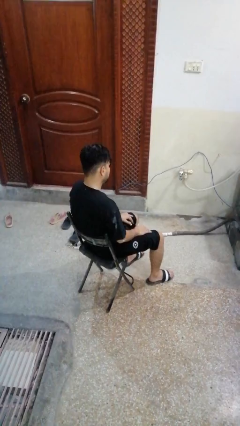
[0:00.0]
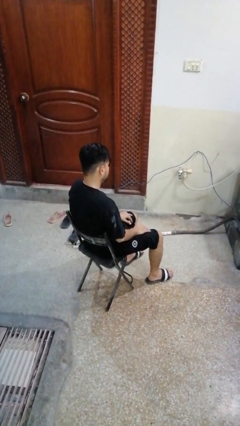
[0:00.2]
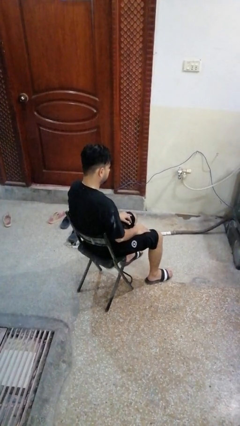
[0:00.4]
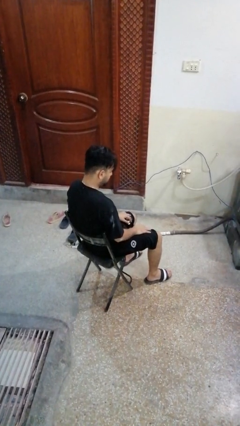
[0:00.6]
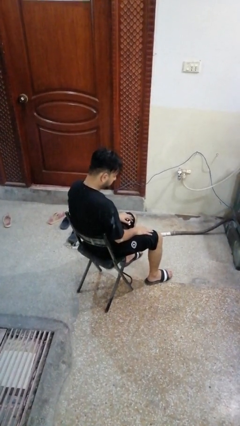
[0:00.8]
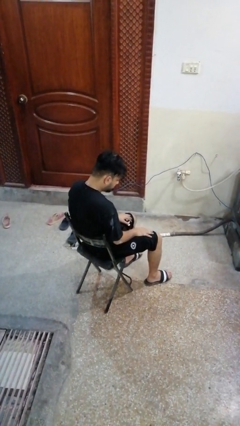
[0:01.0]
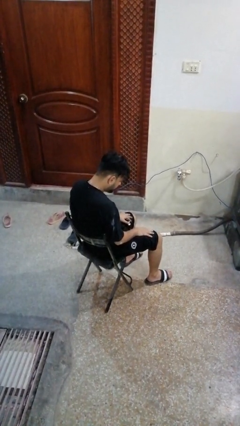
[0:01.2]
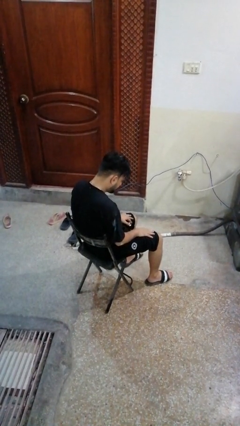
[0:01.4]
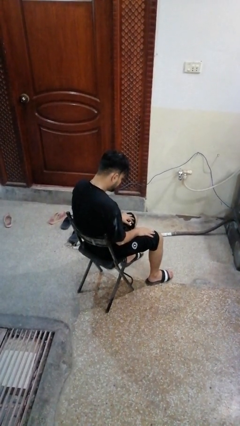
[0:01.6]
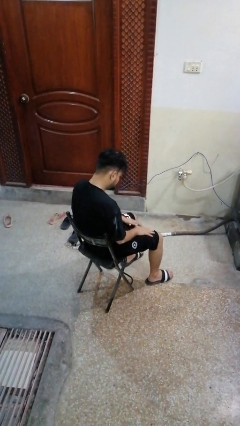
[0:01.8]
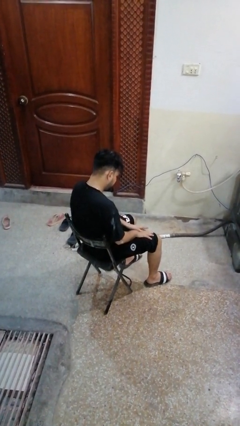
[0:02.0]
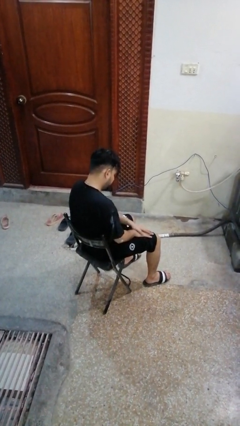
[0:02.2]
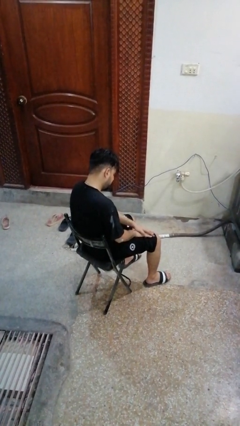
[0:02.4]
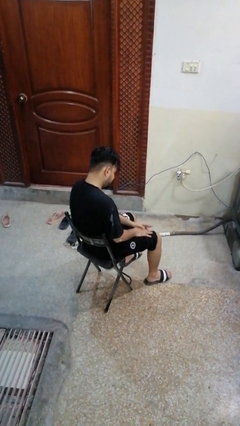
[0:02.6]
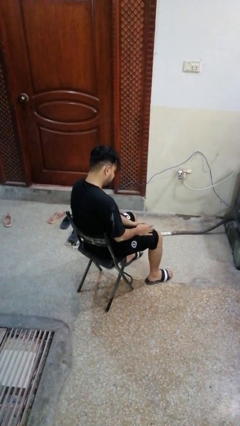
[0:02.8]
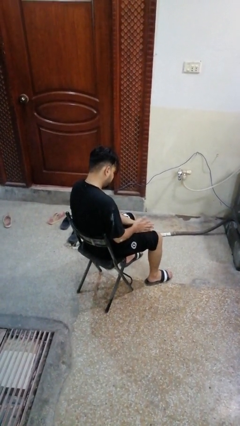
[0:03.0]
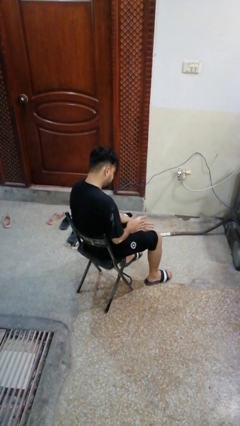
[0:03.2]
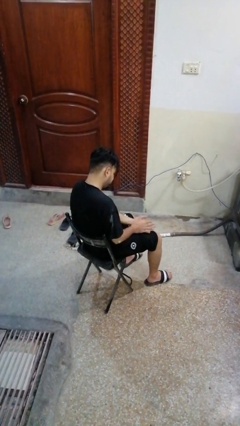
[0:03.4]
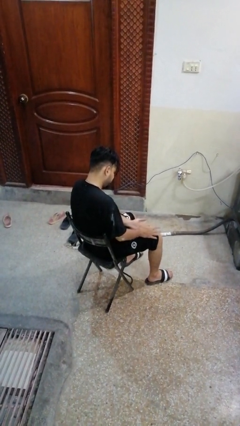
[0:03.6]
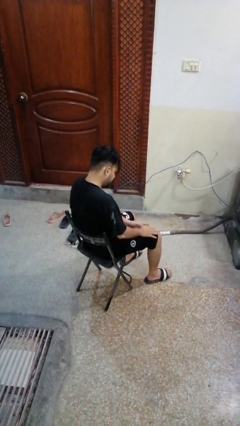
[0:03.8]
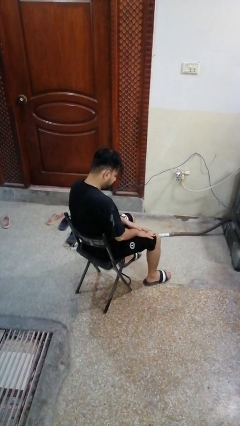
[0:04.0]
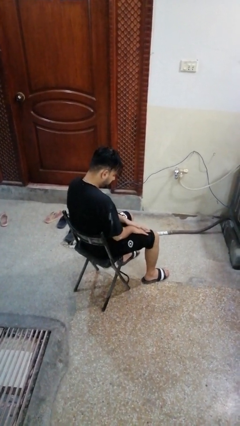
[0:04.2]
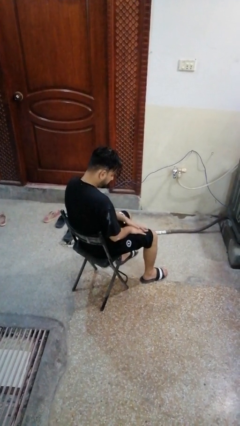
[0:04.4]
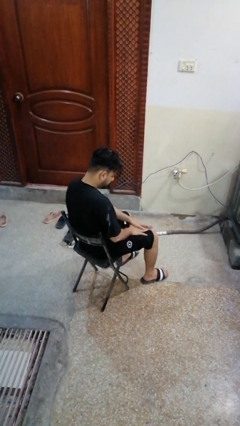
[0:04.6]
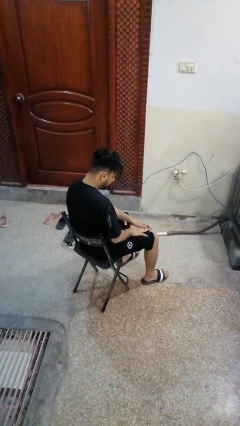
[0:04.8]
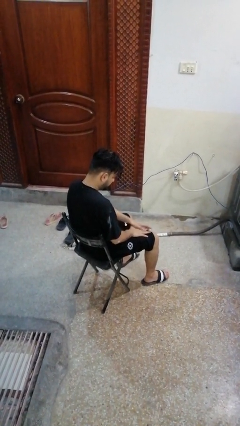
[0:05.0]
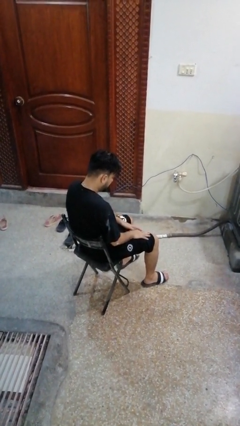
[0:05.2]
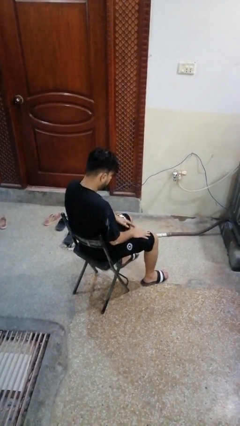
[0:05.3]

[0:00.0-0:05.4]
person looks at hands in lap

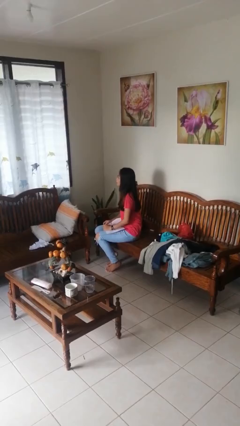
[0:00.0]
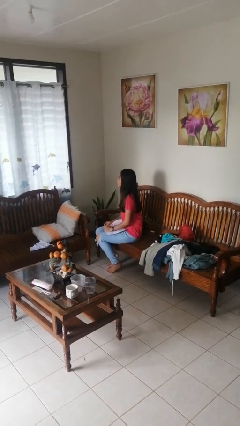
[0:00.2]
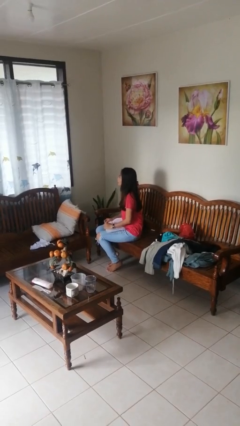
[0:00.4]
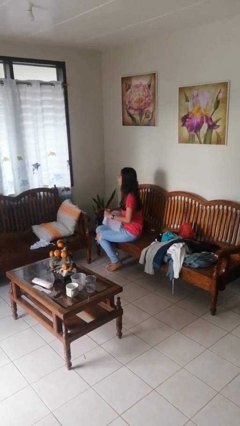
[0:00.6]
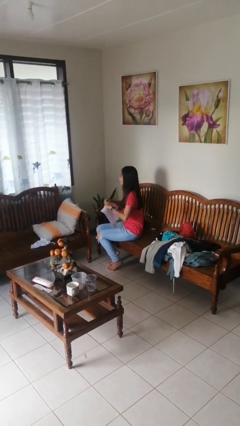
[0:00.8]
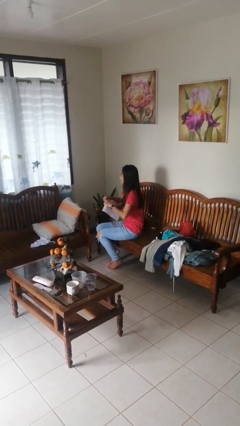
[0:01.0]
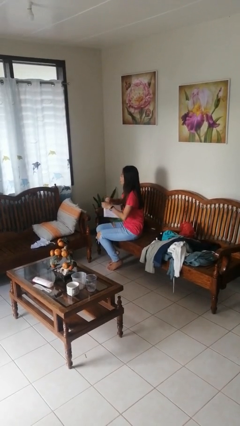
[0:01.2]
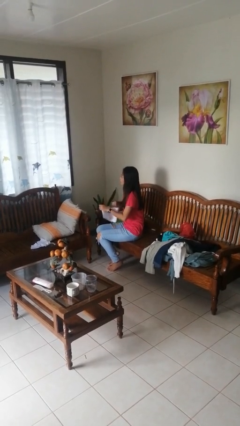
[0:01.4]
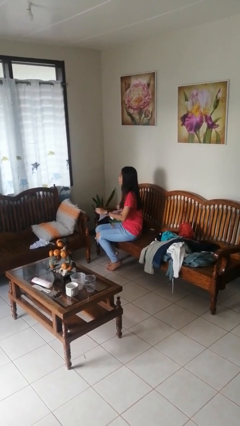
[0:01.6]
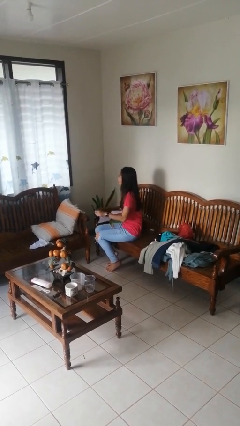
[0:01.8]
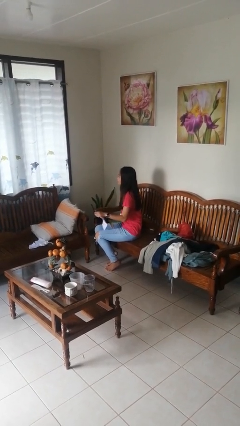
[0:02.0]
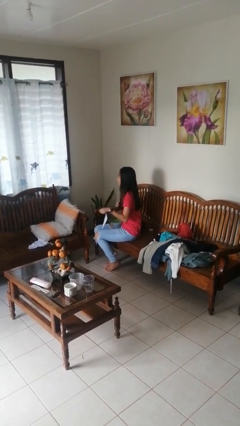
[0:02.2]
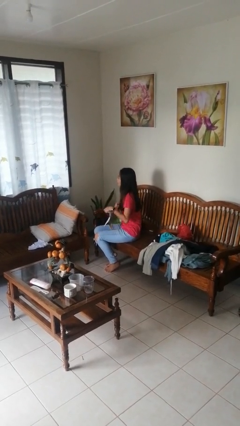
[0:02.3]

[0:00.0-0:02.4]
person tears paper

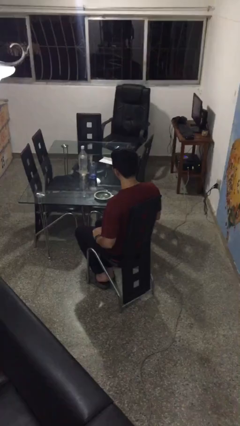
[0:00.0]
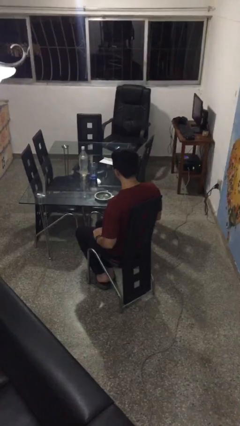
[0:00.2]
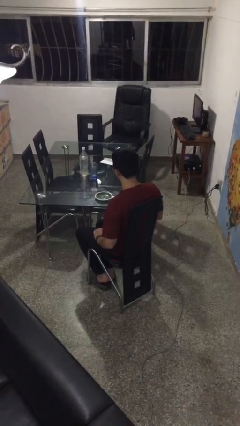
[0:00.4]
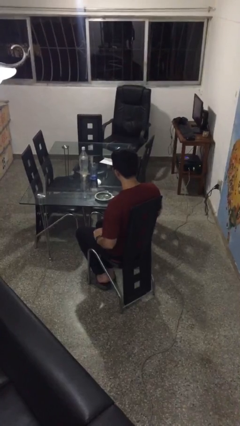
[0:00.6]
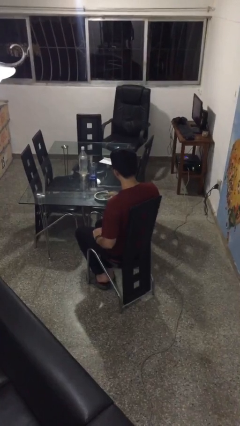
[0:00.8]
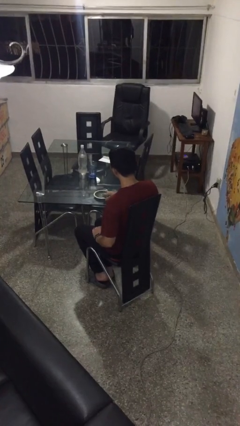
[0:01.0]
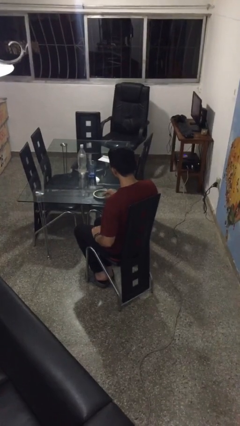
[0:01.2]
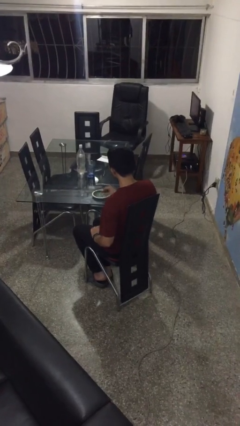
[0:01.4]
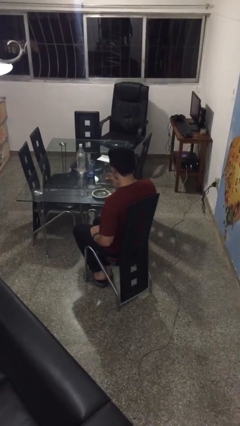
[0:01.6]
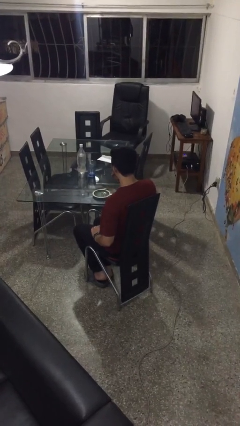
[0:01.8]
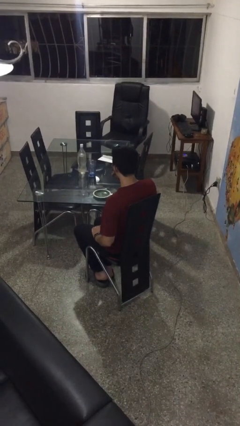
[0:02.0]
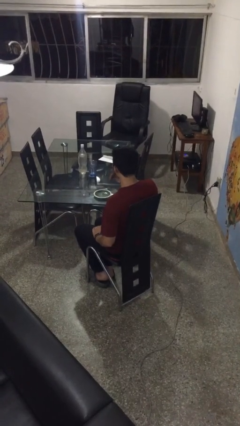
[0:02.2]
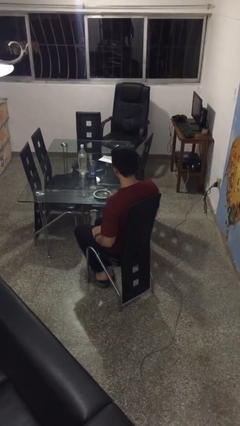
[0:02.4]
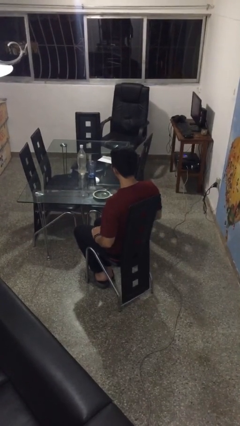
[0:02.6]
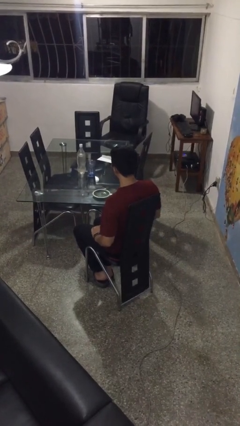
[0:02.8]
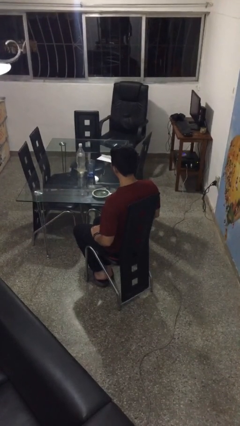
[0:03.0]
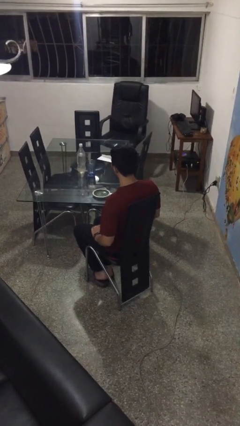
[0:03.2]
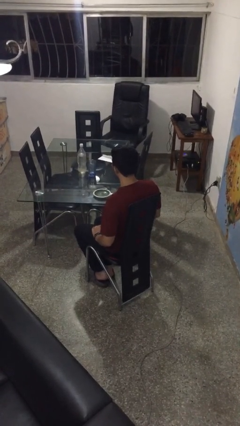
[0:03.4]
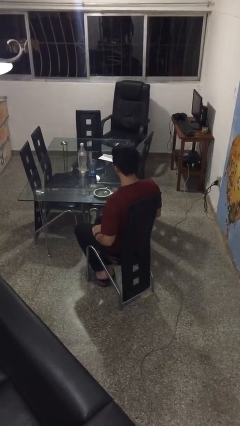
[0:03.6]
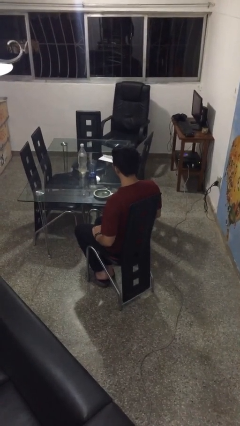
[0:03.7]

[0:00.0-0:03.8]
person eats with hands

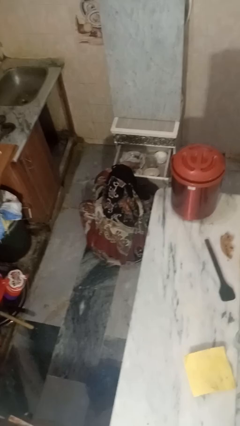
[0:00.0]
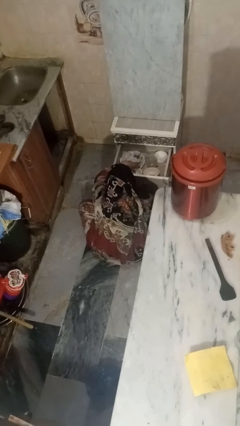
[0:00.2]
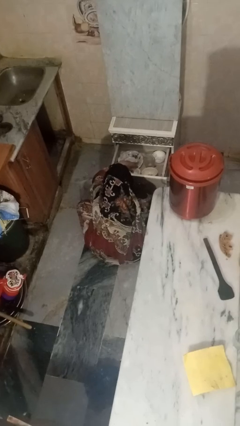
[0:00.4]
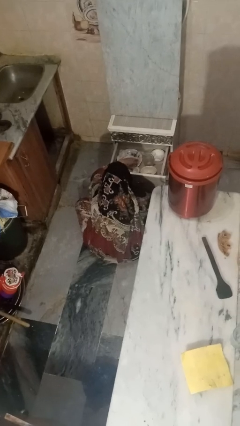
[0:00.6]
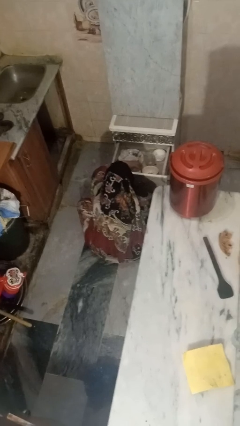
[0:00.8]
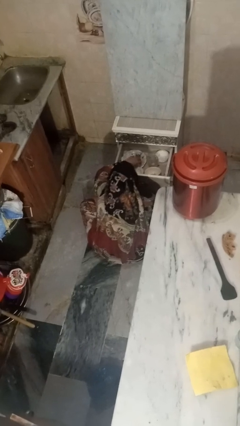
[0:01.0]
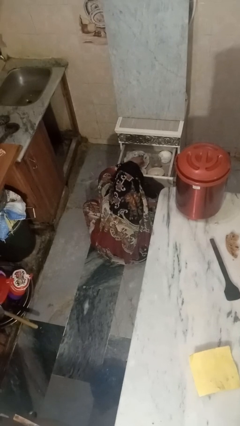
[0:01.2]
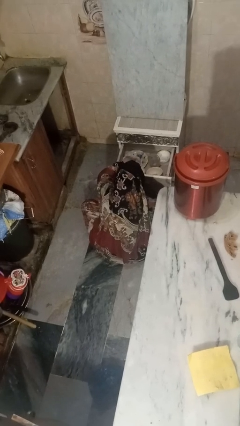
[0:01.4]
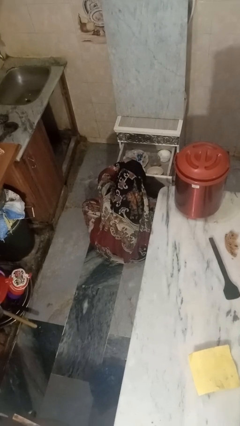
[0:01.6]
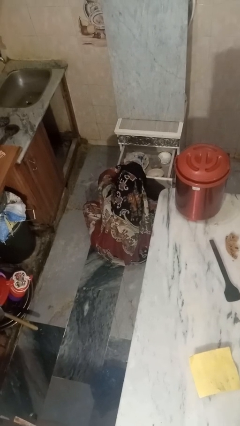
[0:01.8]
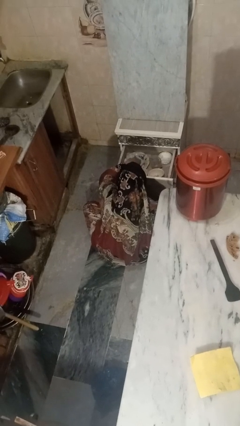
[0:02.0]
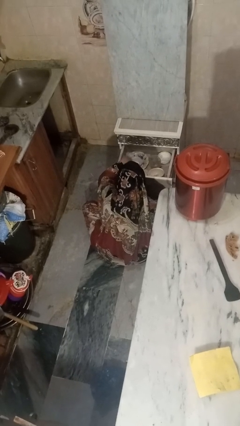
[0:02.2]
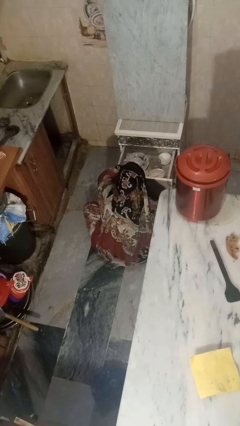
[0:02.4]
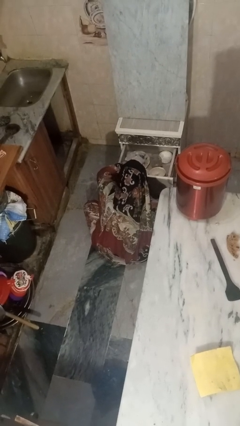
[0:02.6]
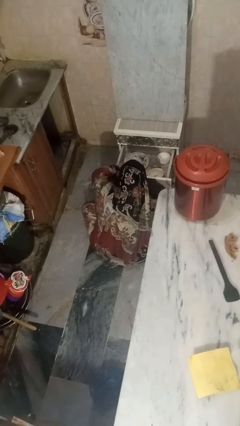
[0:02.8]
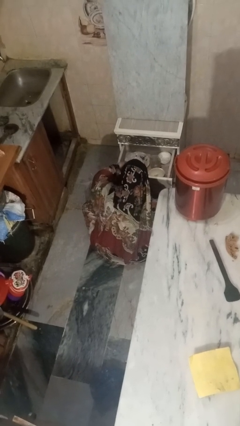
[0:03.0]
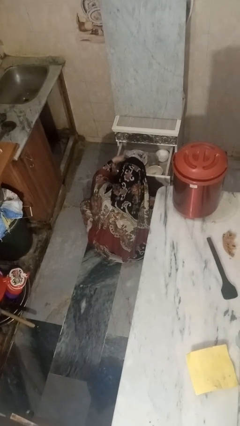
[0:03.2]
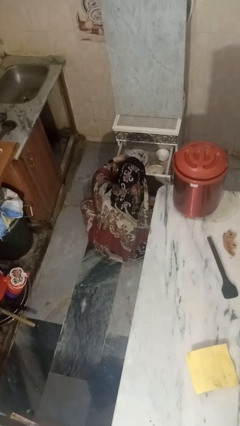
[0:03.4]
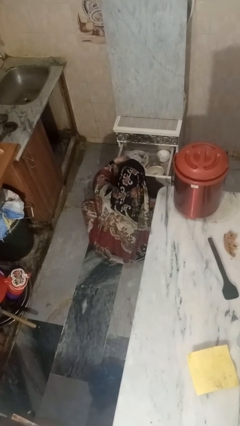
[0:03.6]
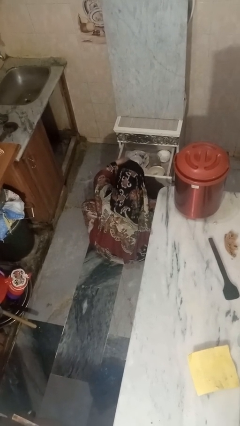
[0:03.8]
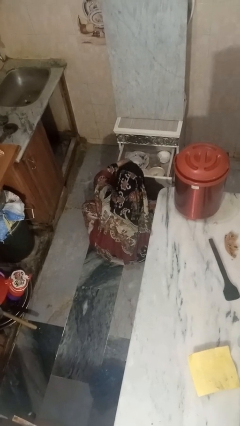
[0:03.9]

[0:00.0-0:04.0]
person searches in kitchen drawer

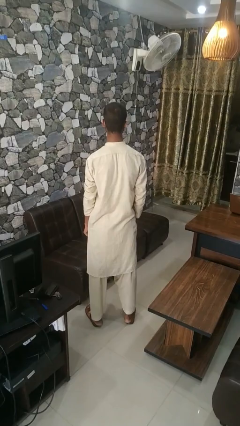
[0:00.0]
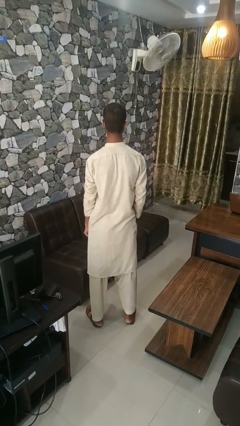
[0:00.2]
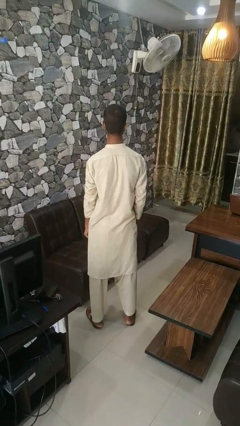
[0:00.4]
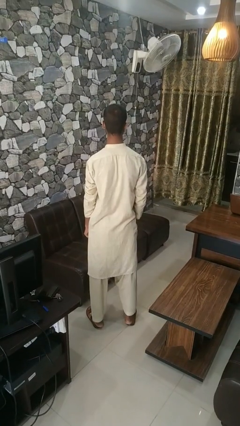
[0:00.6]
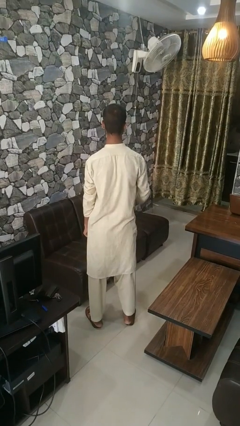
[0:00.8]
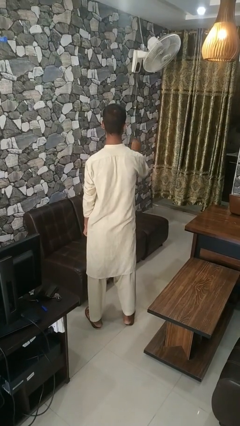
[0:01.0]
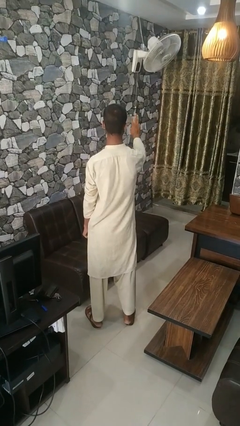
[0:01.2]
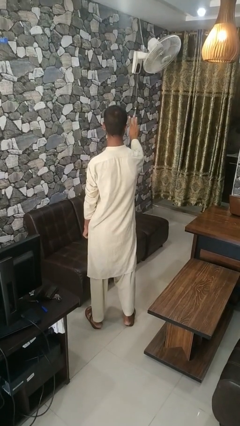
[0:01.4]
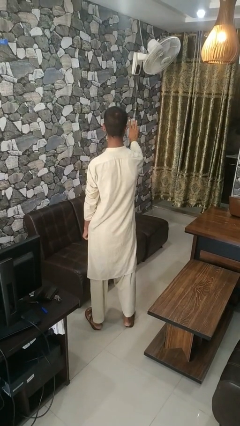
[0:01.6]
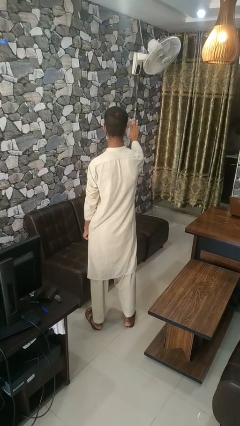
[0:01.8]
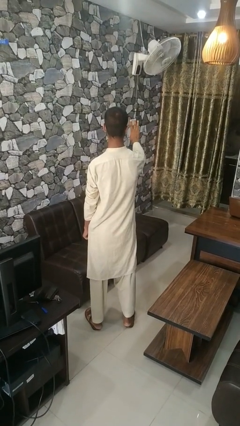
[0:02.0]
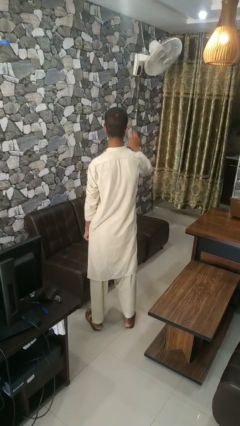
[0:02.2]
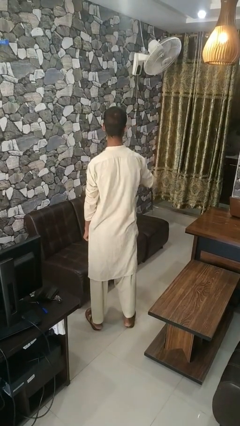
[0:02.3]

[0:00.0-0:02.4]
person gestures number three
